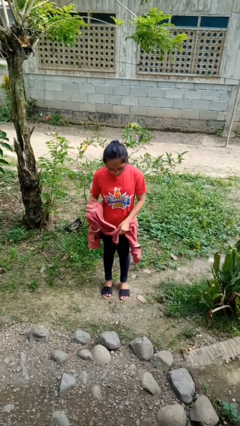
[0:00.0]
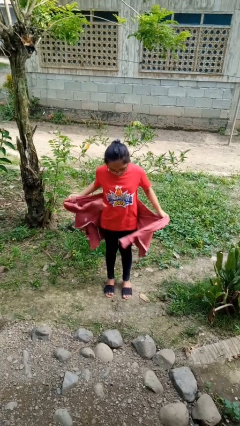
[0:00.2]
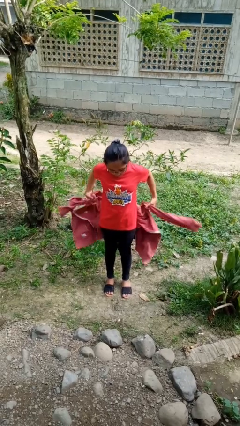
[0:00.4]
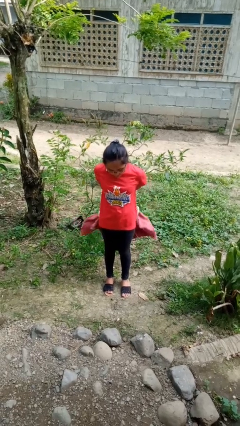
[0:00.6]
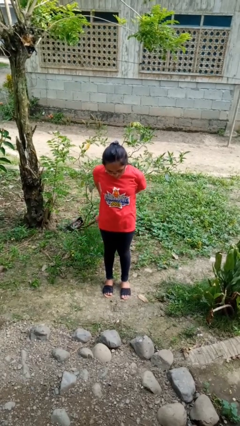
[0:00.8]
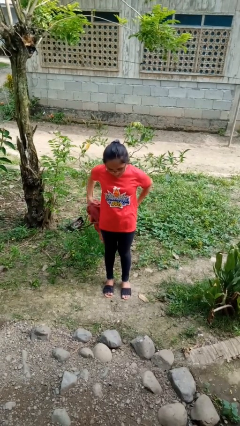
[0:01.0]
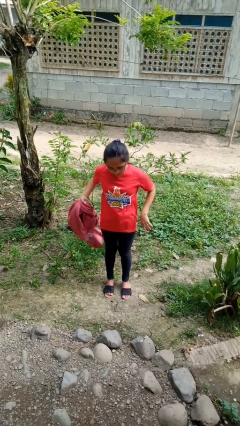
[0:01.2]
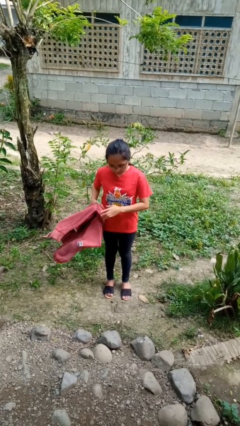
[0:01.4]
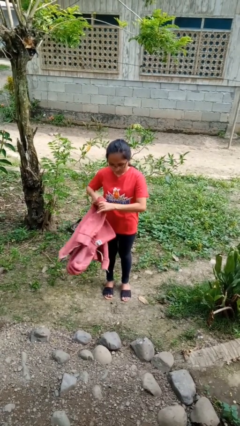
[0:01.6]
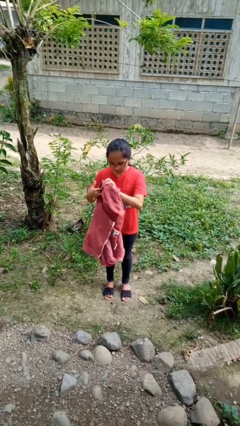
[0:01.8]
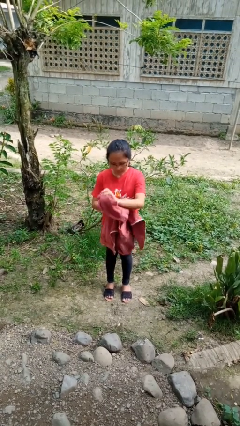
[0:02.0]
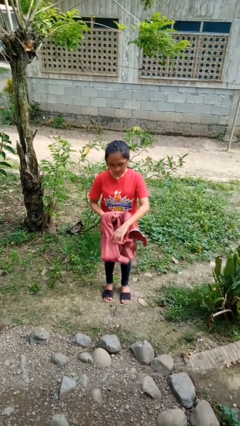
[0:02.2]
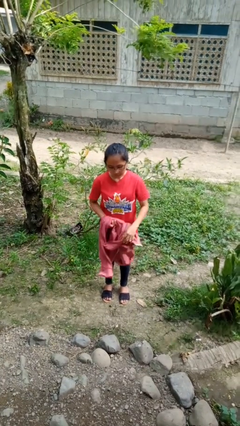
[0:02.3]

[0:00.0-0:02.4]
person unties jacket around waist

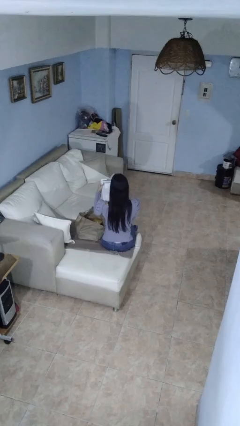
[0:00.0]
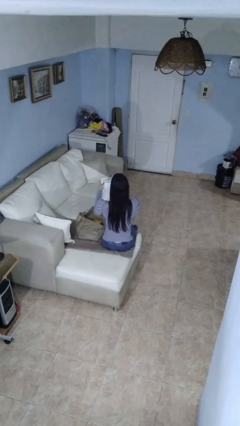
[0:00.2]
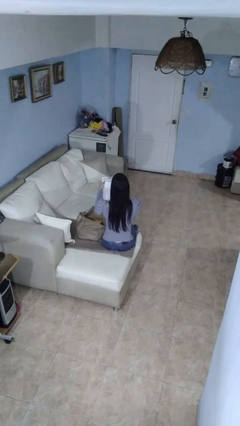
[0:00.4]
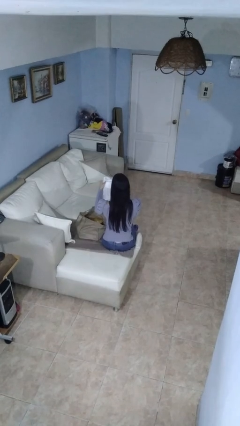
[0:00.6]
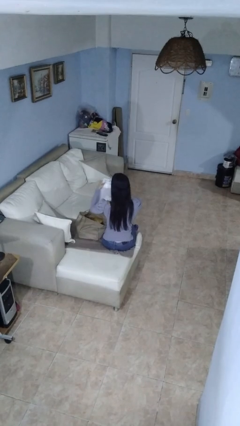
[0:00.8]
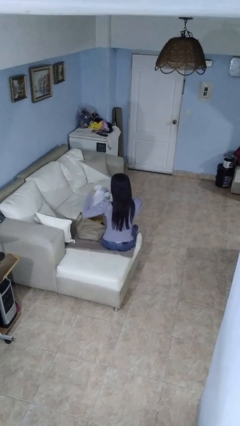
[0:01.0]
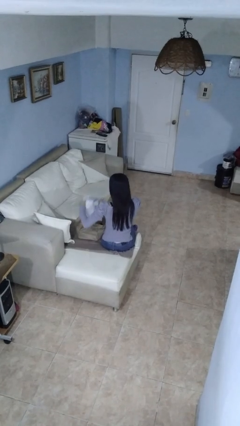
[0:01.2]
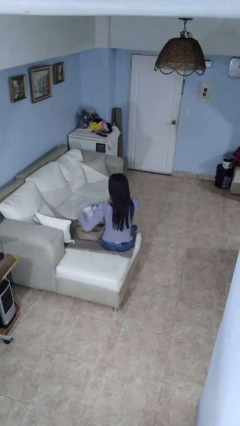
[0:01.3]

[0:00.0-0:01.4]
person puts object into bag

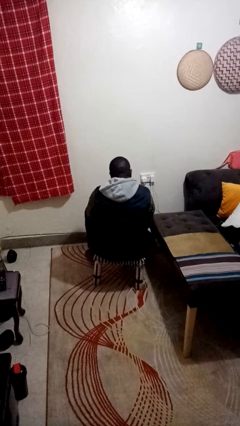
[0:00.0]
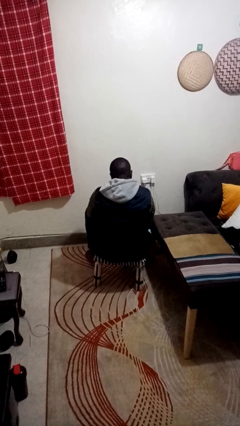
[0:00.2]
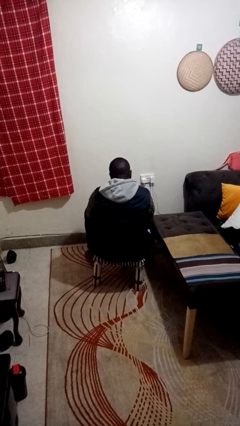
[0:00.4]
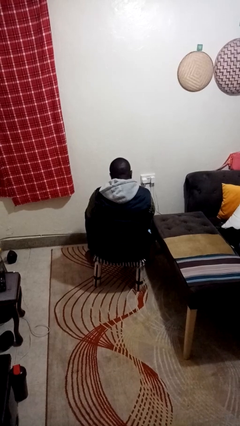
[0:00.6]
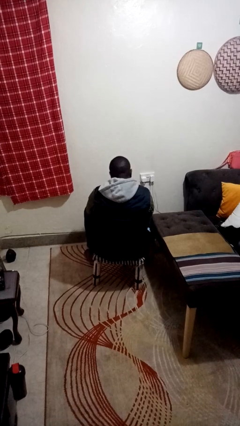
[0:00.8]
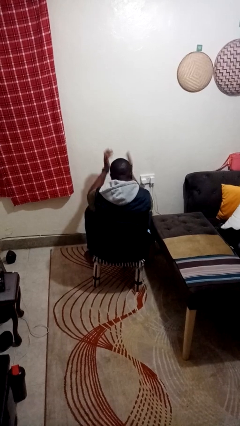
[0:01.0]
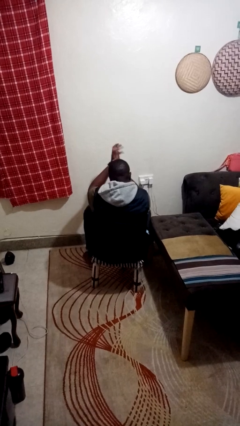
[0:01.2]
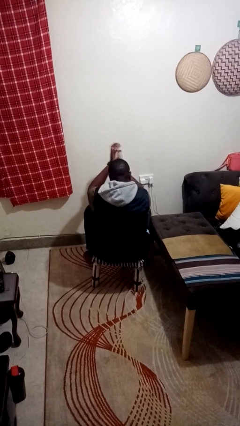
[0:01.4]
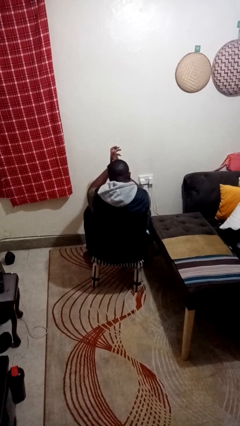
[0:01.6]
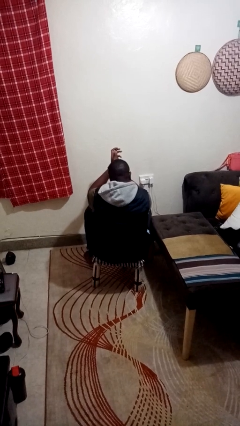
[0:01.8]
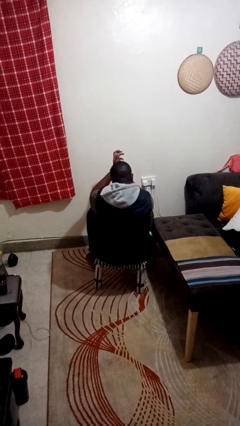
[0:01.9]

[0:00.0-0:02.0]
person claps hands

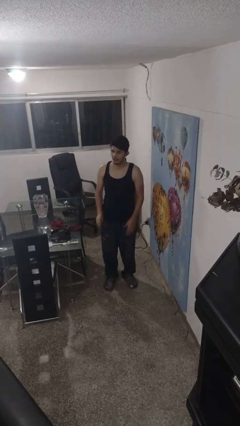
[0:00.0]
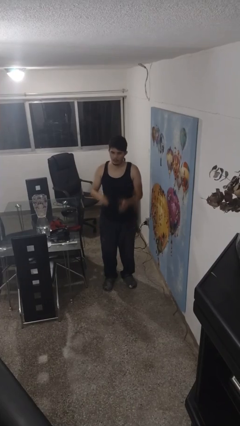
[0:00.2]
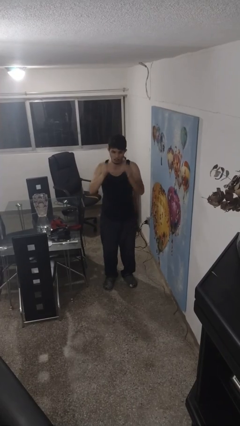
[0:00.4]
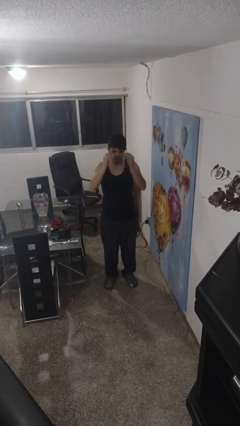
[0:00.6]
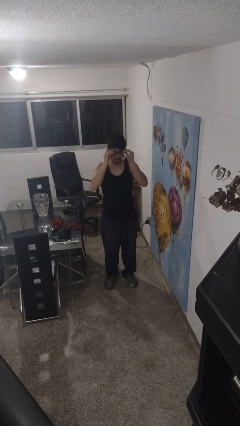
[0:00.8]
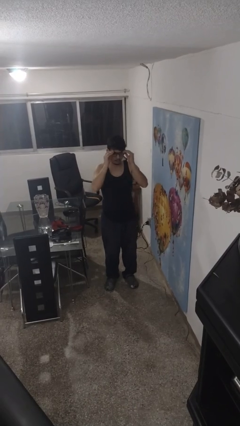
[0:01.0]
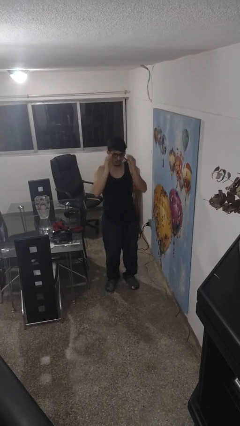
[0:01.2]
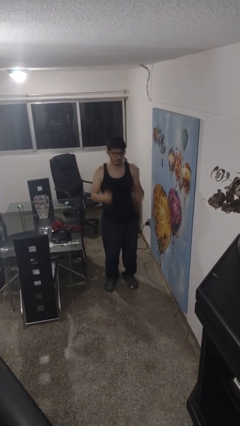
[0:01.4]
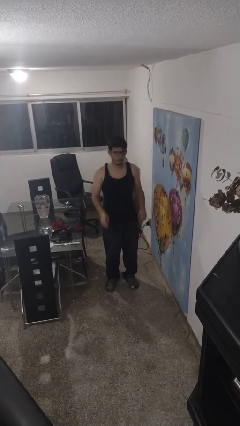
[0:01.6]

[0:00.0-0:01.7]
person puts on glasses

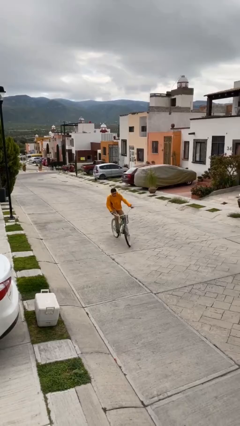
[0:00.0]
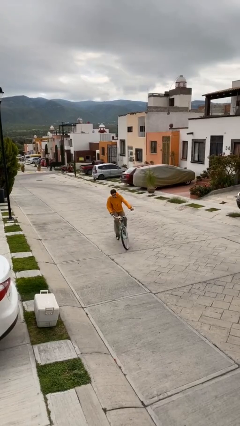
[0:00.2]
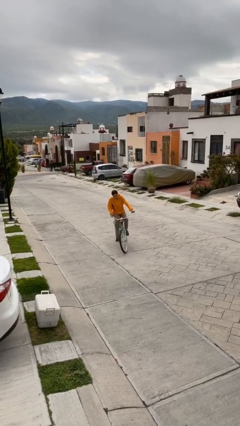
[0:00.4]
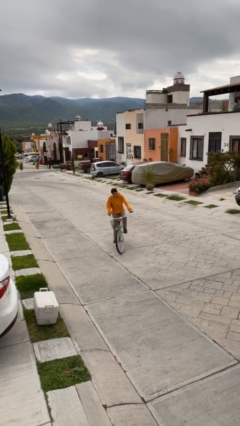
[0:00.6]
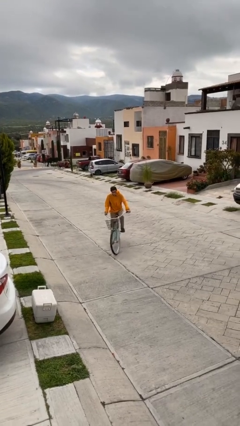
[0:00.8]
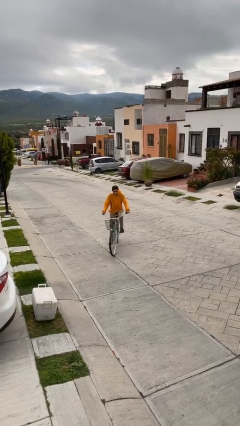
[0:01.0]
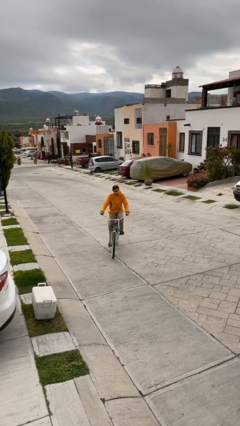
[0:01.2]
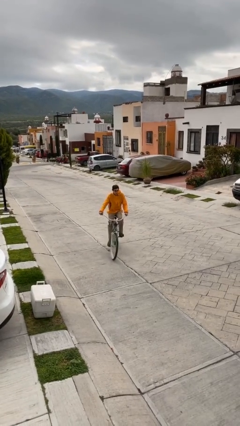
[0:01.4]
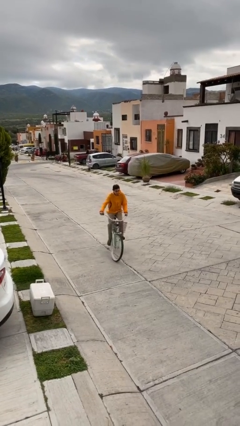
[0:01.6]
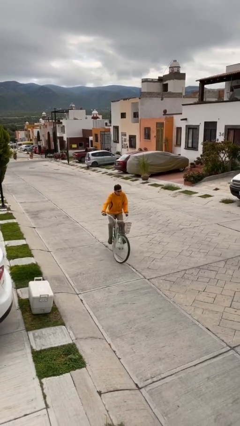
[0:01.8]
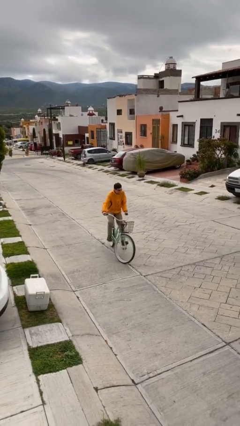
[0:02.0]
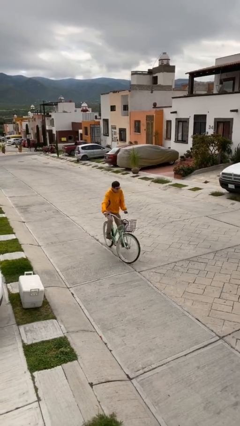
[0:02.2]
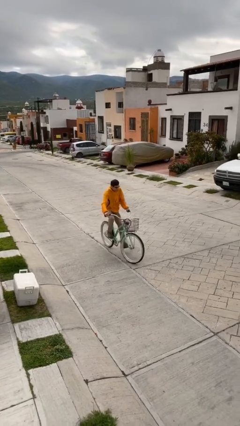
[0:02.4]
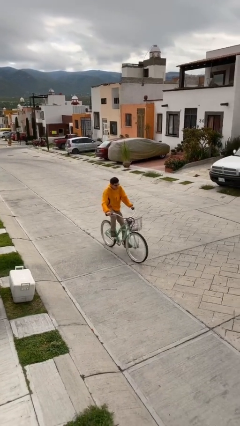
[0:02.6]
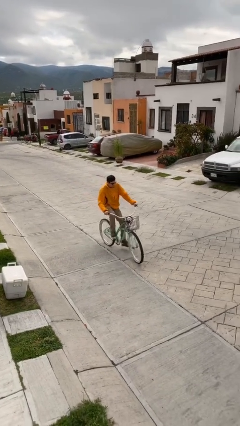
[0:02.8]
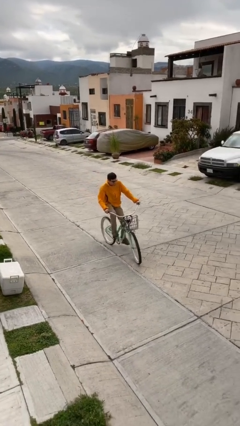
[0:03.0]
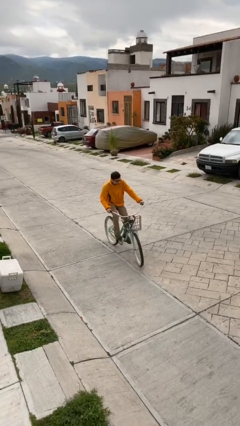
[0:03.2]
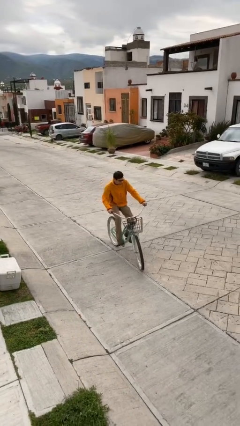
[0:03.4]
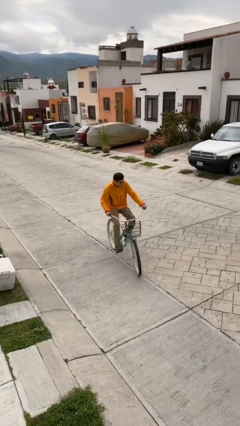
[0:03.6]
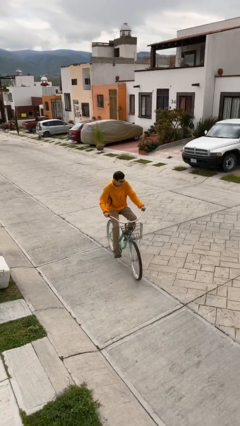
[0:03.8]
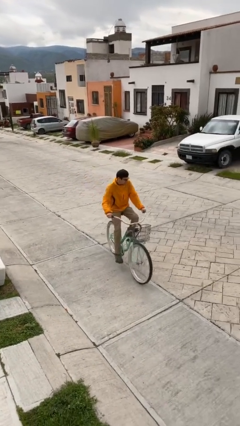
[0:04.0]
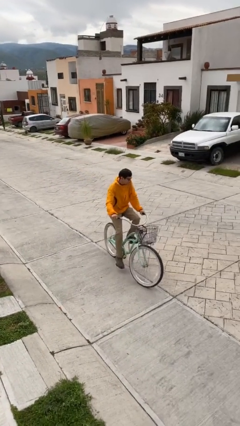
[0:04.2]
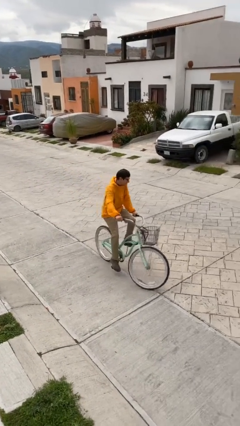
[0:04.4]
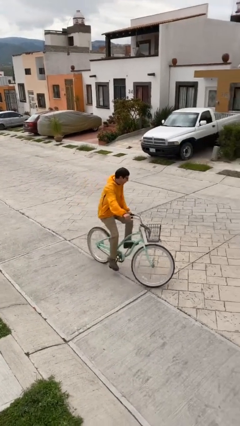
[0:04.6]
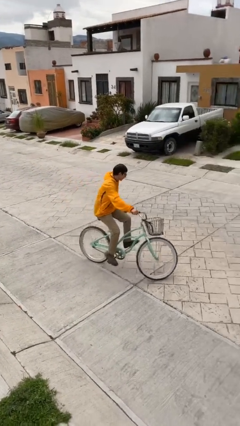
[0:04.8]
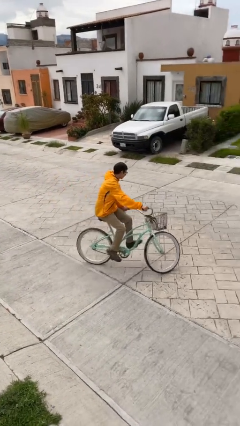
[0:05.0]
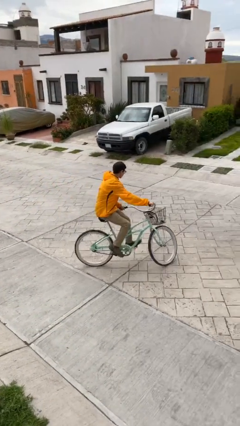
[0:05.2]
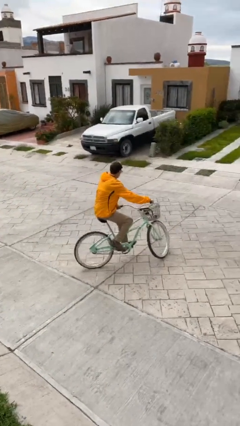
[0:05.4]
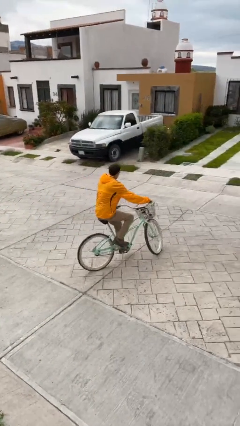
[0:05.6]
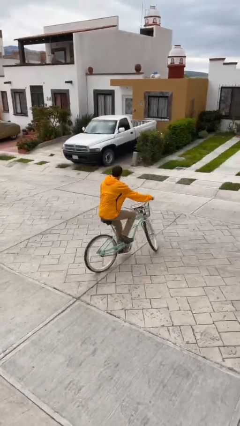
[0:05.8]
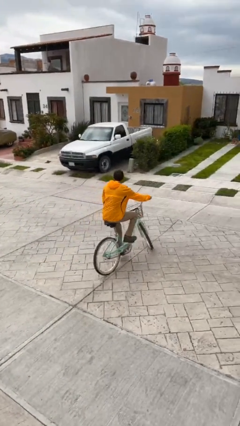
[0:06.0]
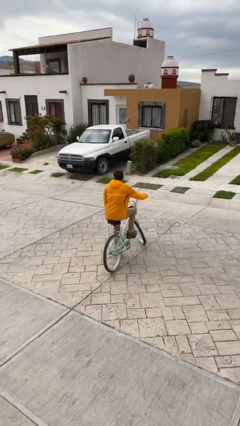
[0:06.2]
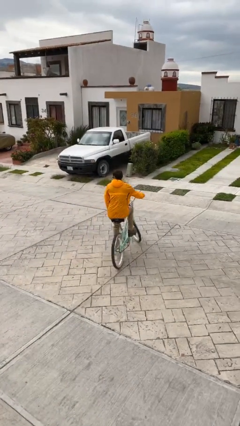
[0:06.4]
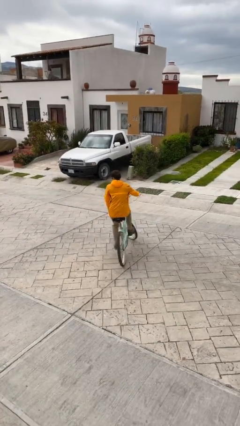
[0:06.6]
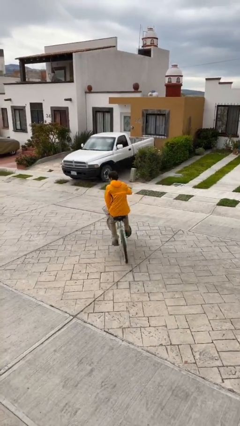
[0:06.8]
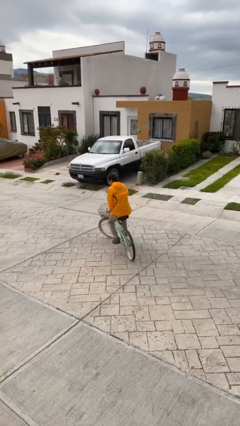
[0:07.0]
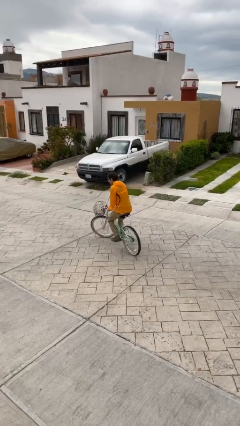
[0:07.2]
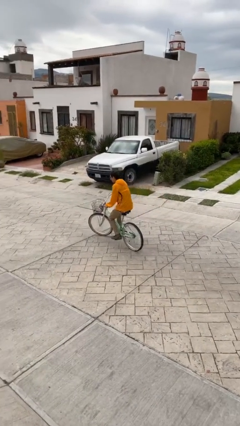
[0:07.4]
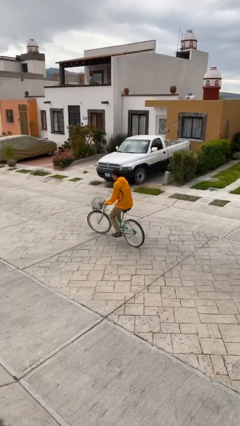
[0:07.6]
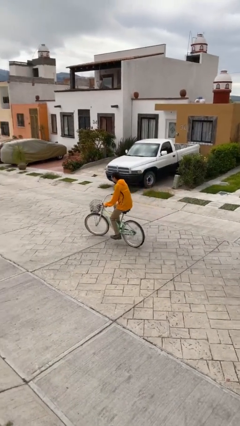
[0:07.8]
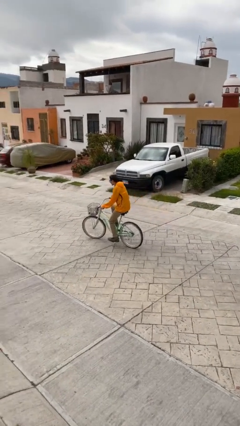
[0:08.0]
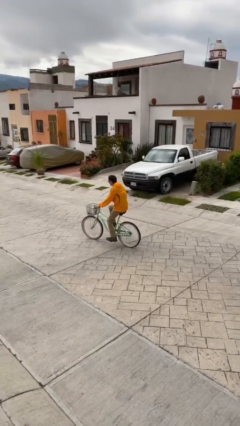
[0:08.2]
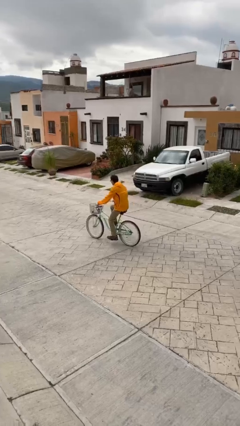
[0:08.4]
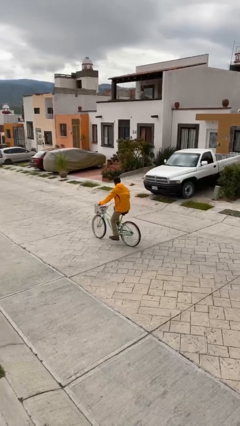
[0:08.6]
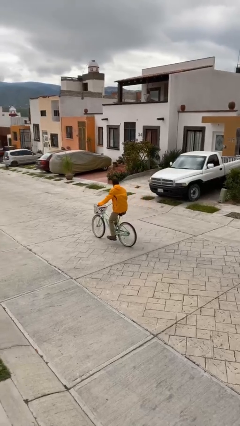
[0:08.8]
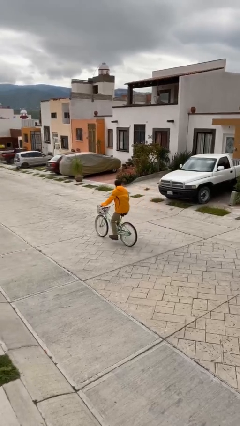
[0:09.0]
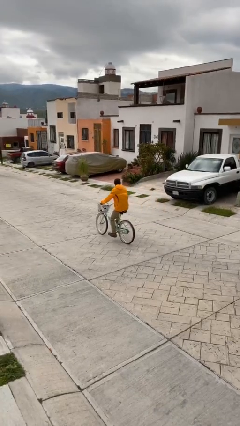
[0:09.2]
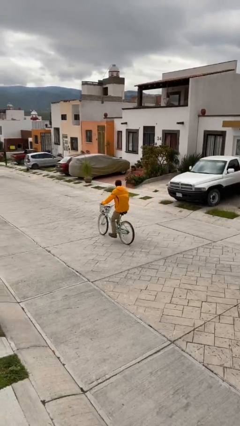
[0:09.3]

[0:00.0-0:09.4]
person rides bicycle

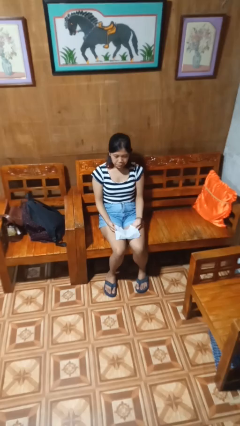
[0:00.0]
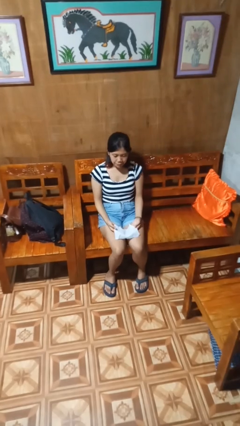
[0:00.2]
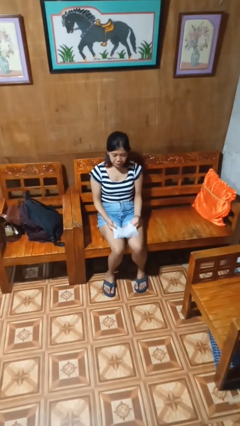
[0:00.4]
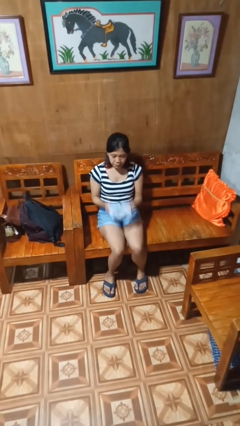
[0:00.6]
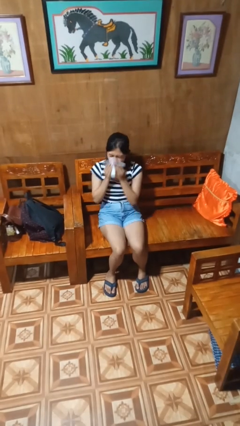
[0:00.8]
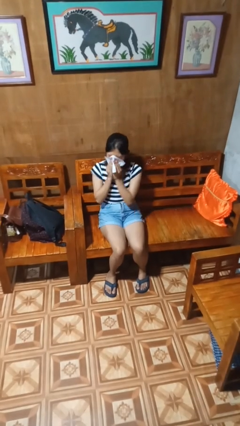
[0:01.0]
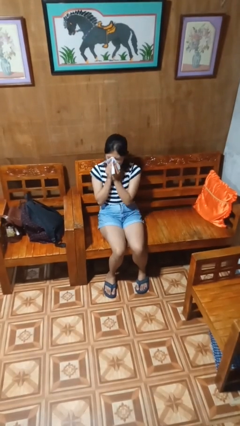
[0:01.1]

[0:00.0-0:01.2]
person blows nose
